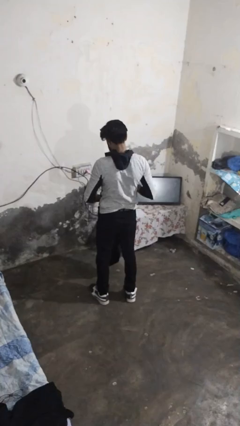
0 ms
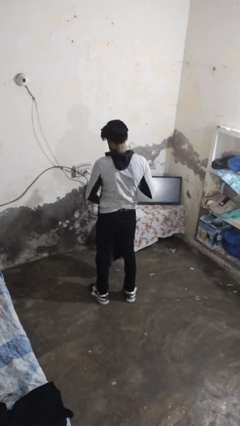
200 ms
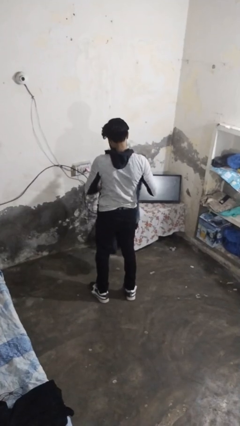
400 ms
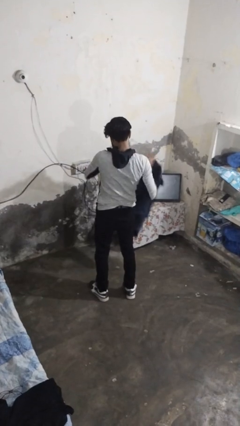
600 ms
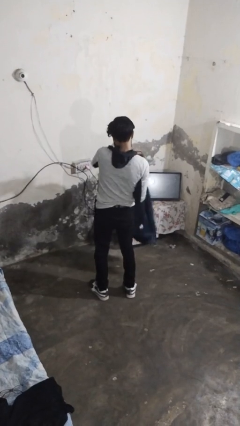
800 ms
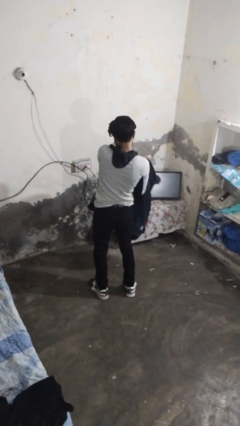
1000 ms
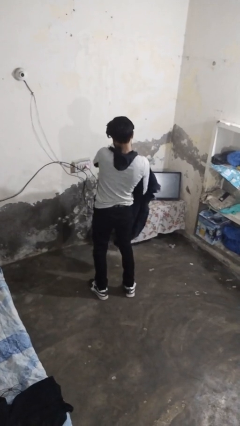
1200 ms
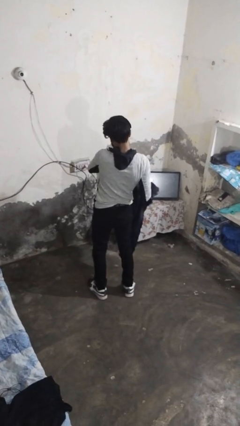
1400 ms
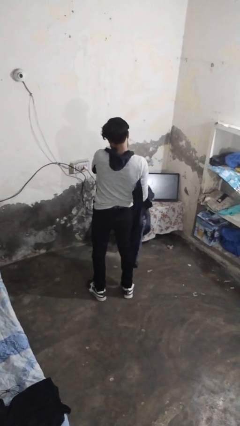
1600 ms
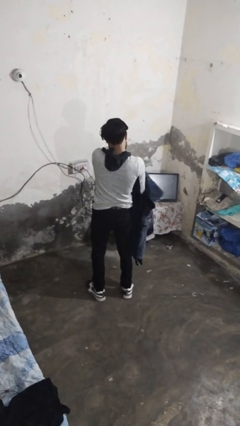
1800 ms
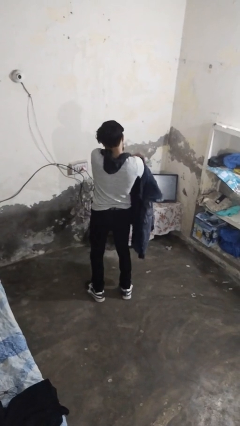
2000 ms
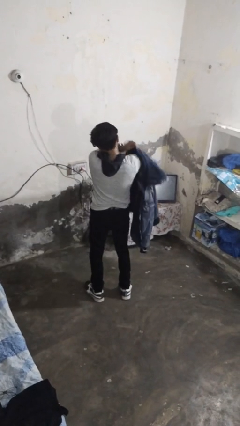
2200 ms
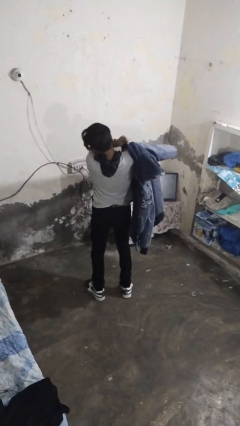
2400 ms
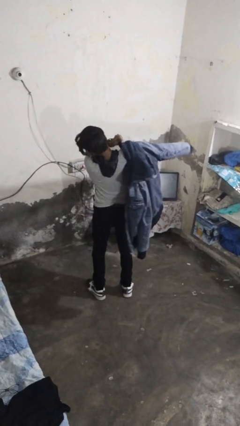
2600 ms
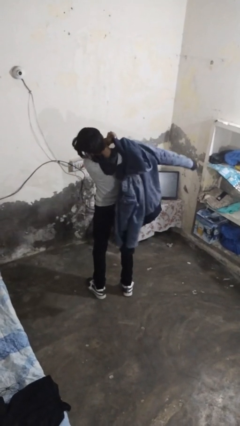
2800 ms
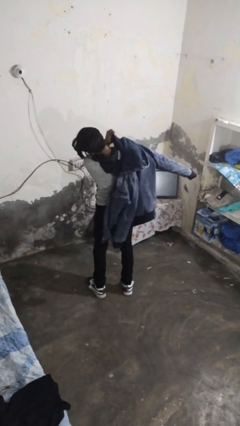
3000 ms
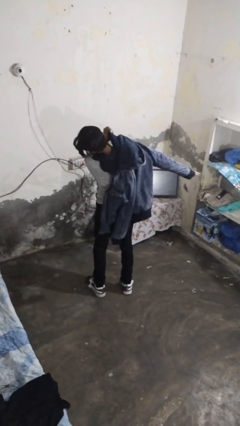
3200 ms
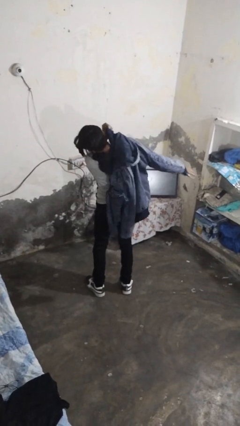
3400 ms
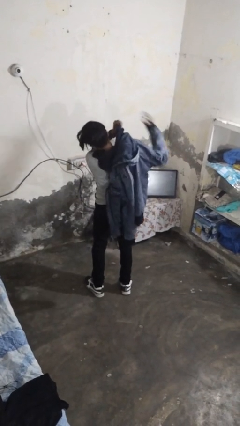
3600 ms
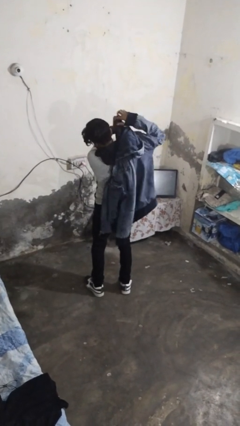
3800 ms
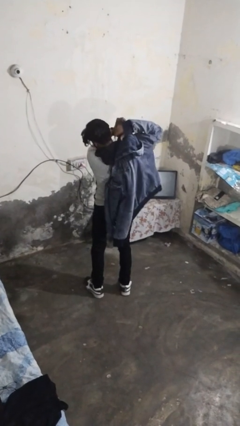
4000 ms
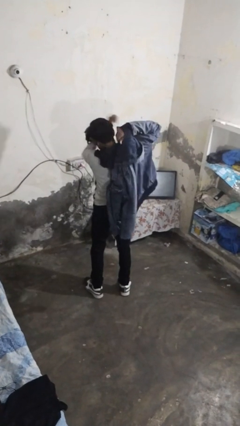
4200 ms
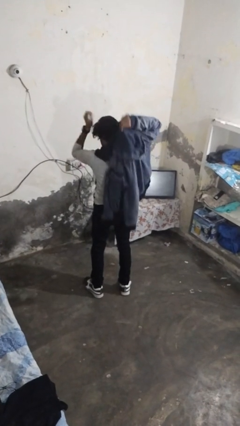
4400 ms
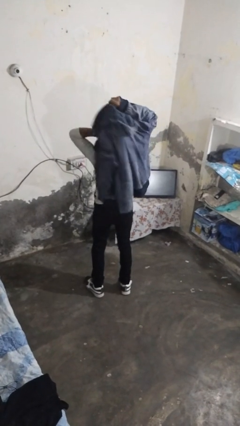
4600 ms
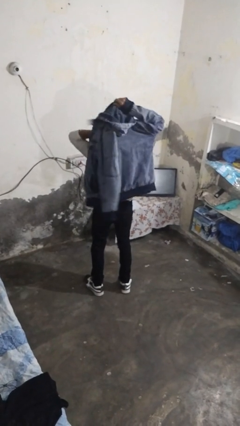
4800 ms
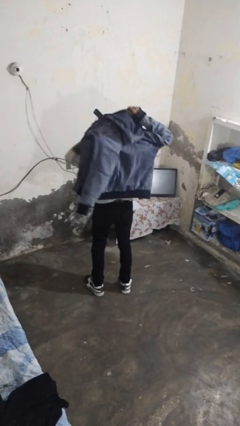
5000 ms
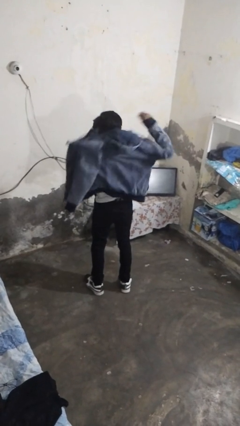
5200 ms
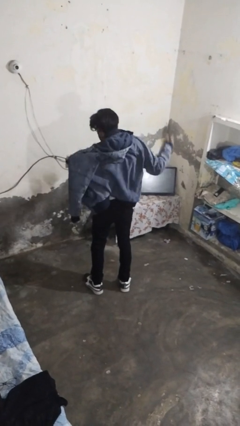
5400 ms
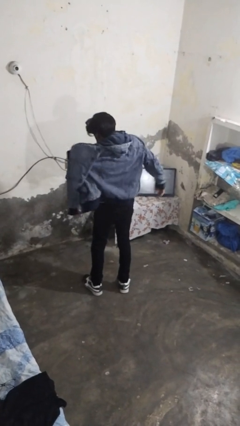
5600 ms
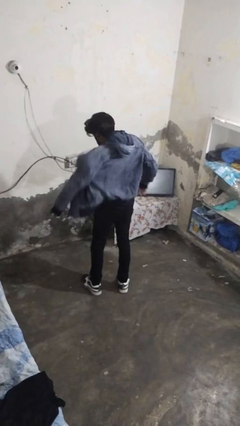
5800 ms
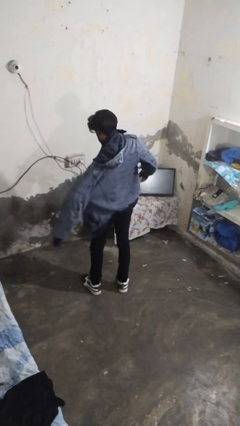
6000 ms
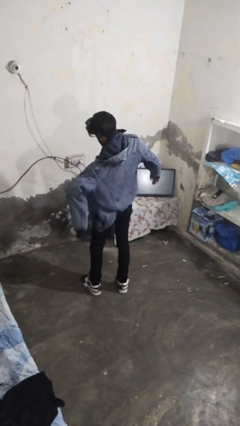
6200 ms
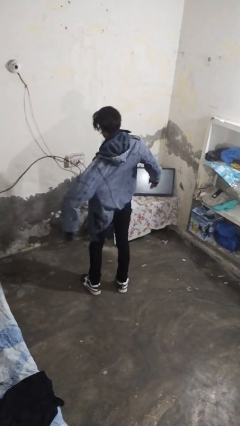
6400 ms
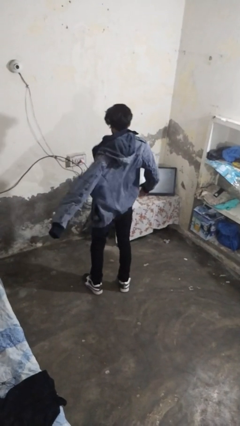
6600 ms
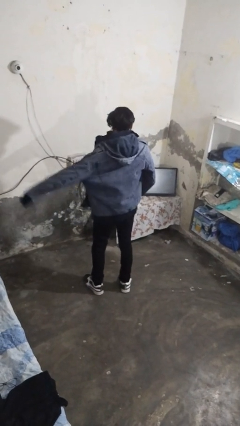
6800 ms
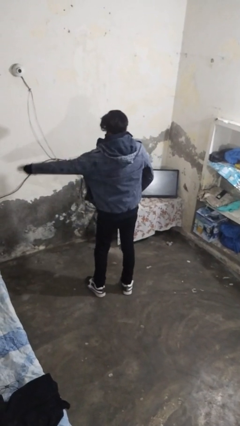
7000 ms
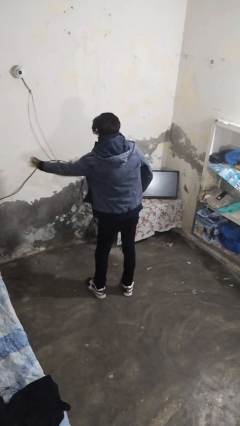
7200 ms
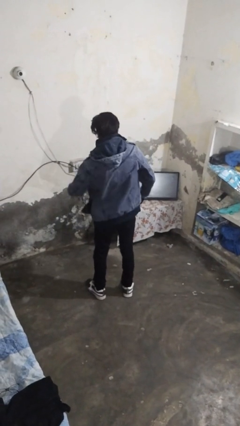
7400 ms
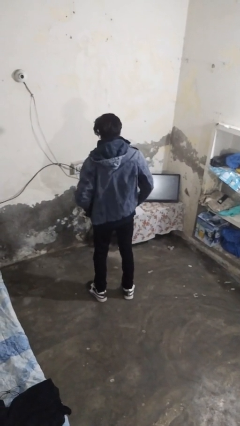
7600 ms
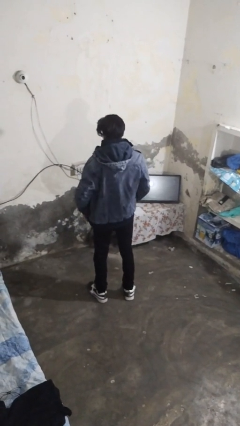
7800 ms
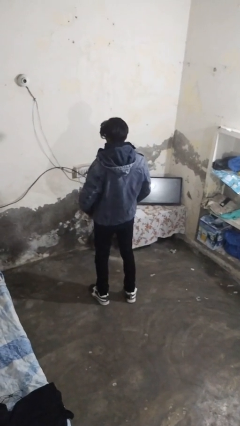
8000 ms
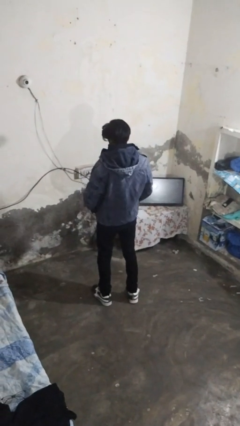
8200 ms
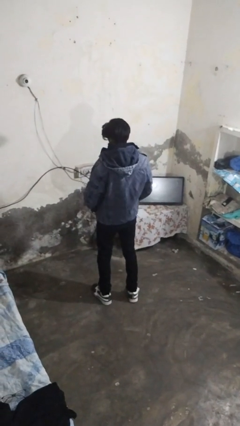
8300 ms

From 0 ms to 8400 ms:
person puts on jacket

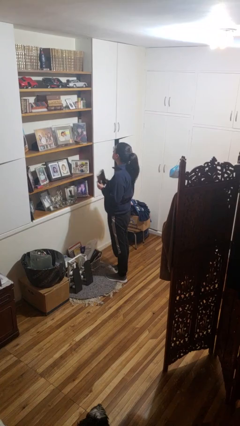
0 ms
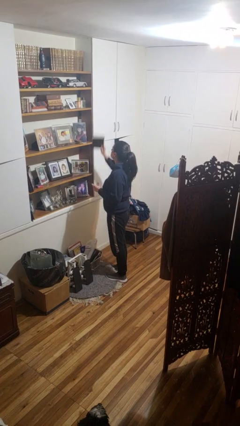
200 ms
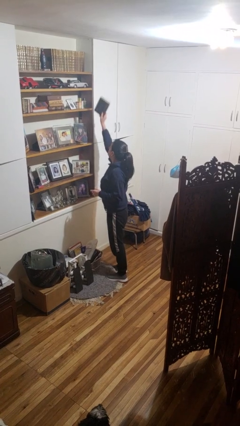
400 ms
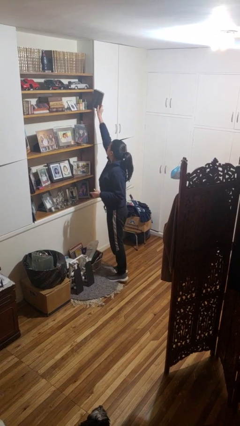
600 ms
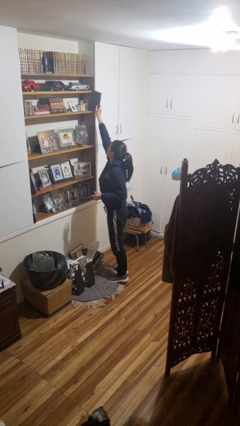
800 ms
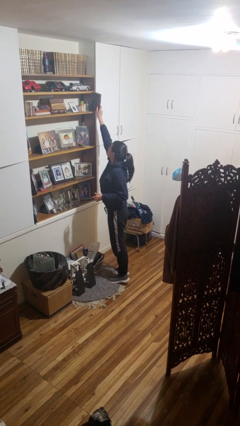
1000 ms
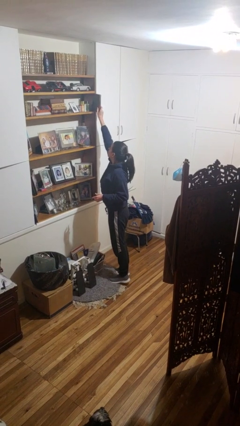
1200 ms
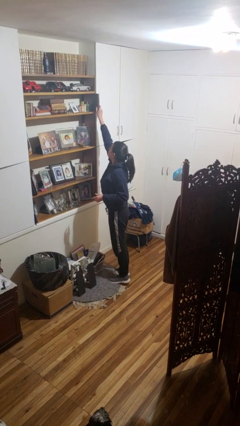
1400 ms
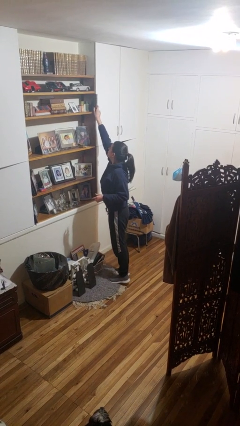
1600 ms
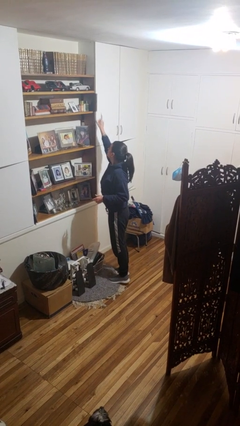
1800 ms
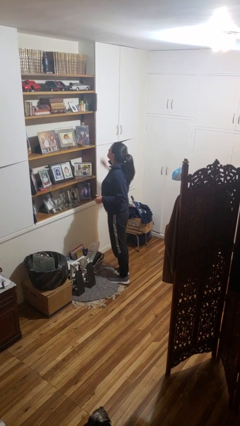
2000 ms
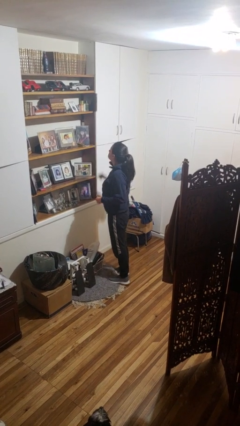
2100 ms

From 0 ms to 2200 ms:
person puts down object on shelf

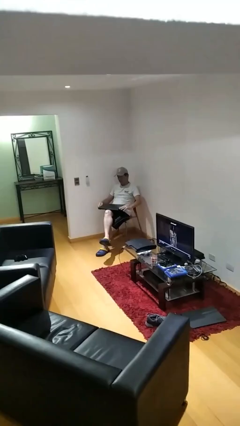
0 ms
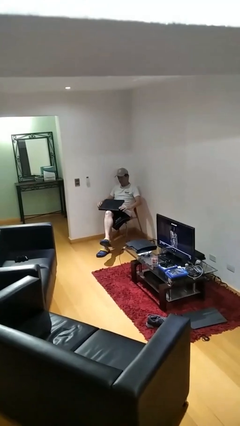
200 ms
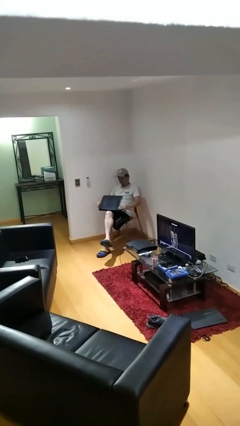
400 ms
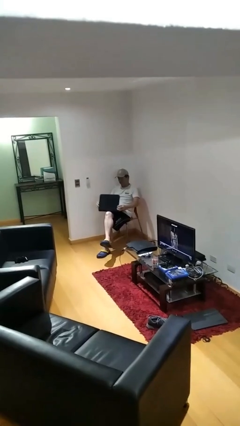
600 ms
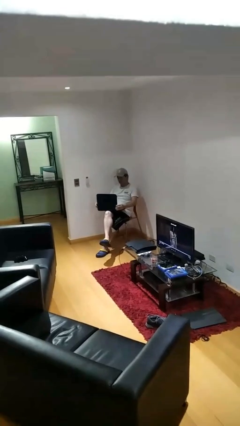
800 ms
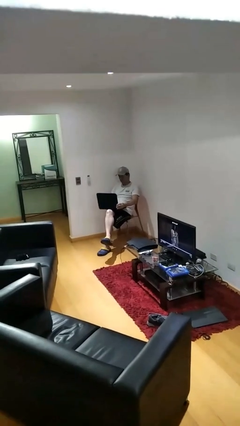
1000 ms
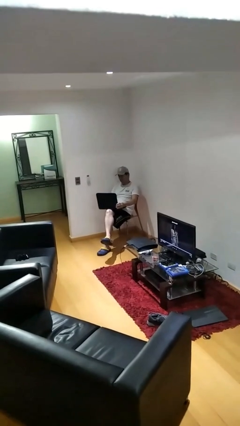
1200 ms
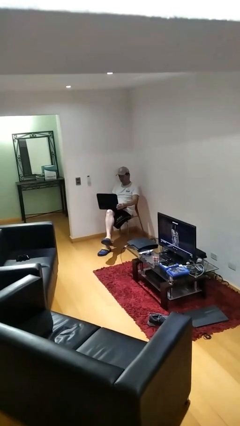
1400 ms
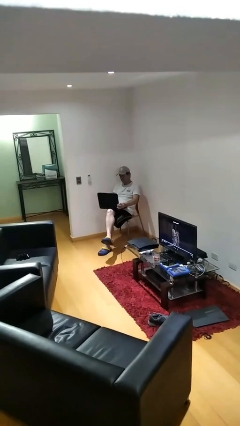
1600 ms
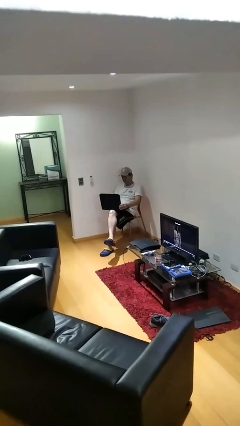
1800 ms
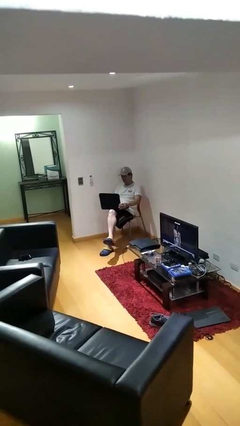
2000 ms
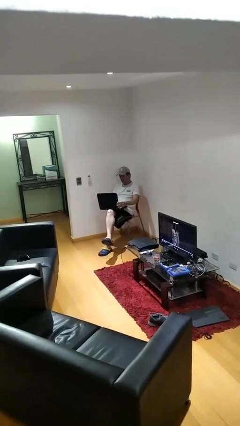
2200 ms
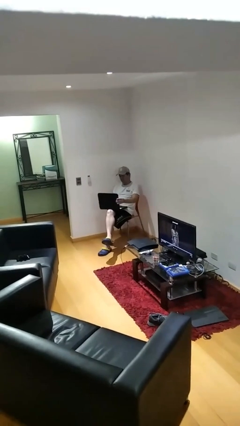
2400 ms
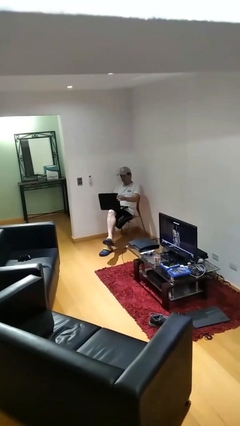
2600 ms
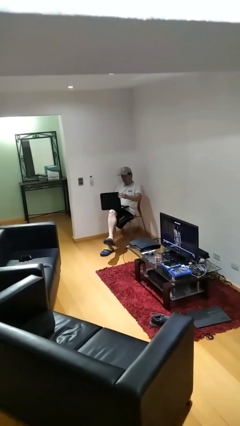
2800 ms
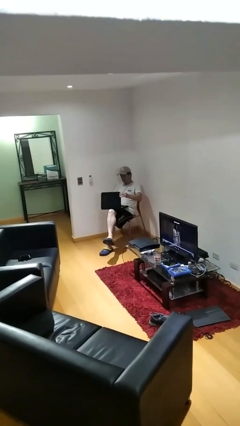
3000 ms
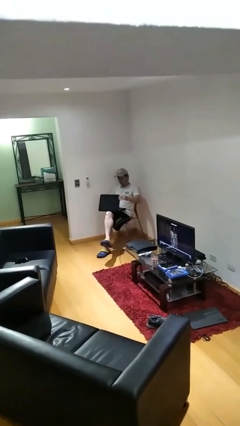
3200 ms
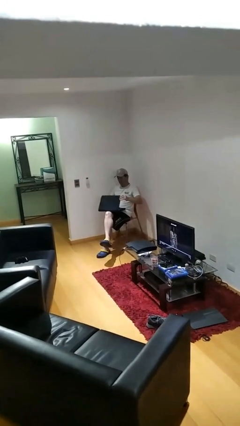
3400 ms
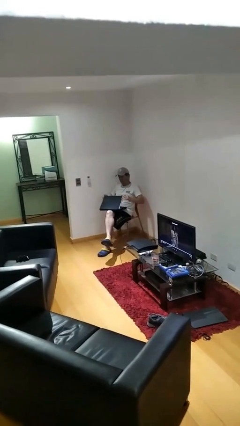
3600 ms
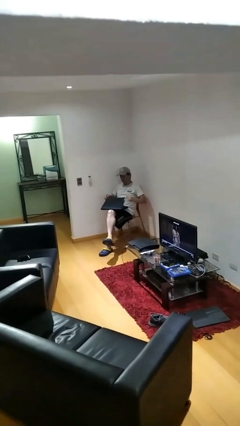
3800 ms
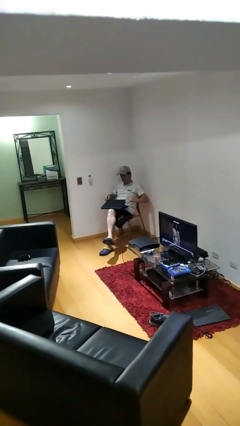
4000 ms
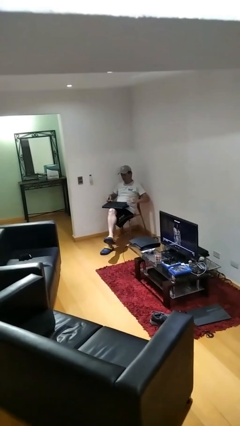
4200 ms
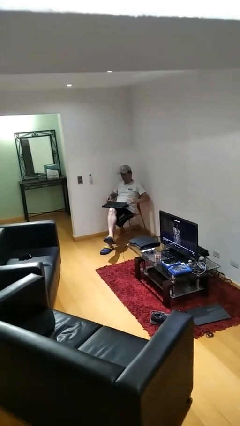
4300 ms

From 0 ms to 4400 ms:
person interacts with laptop

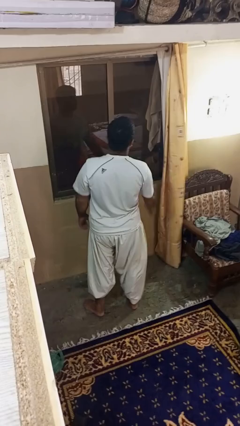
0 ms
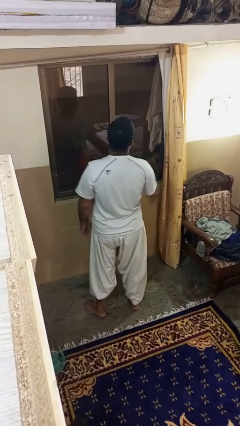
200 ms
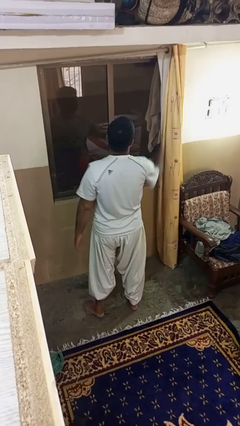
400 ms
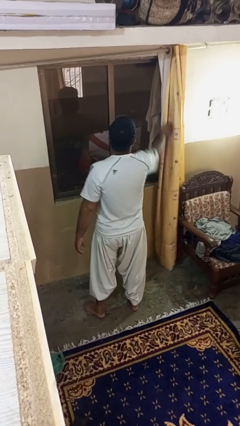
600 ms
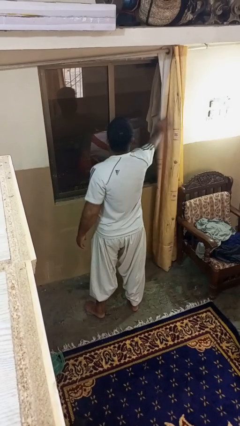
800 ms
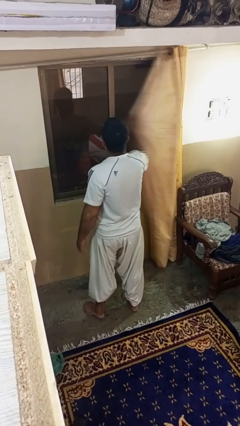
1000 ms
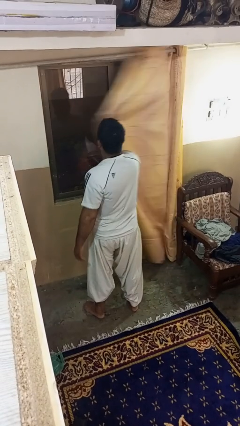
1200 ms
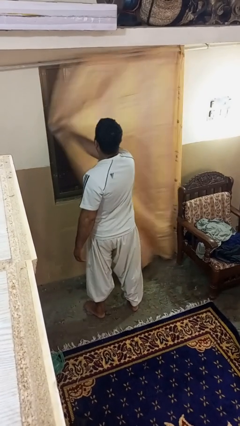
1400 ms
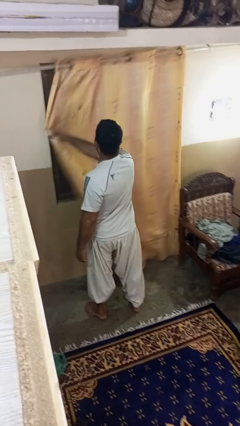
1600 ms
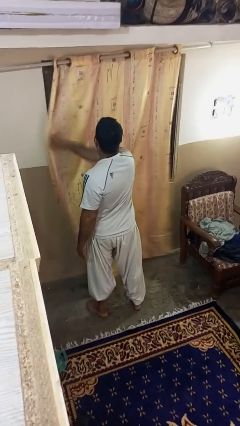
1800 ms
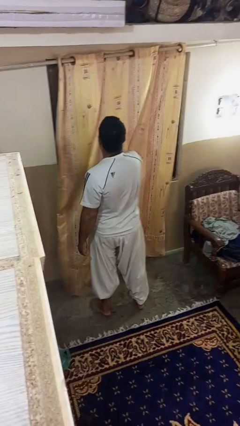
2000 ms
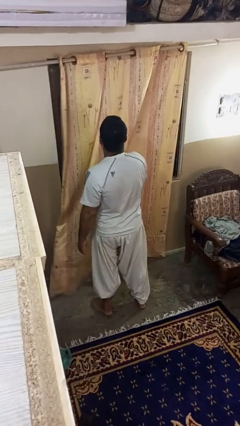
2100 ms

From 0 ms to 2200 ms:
person closes curtains

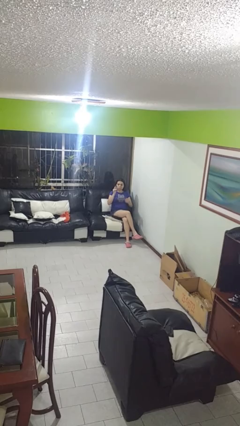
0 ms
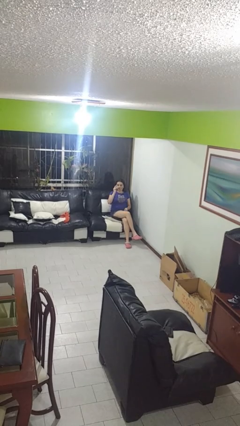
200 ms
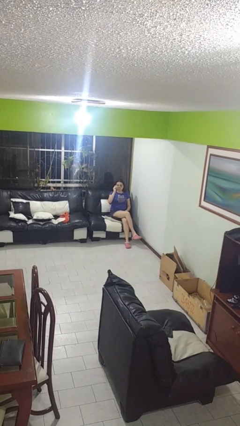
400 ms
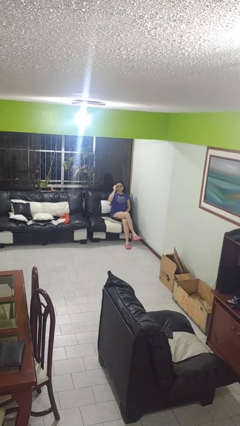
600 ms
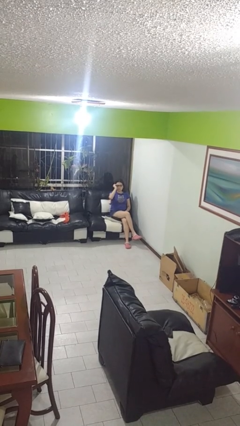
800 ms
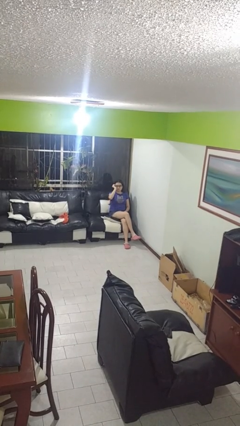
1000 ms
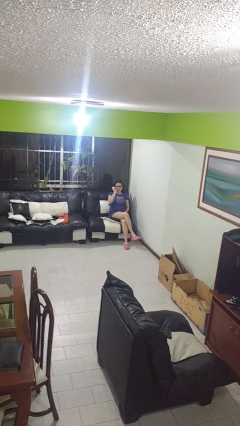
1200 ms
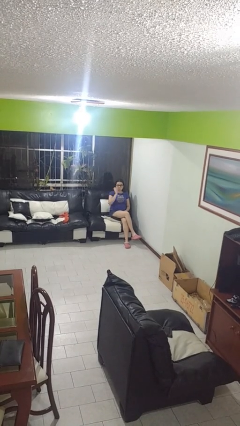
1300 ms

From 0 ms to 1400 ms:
person puts on glasses
